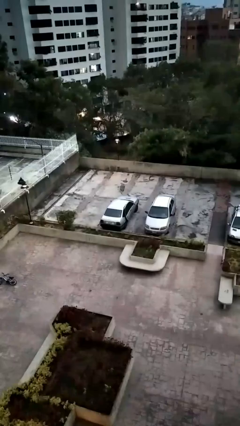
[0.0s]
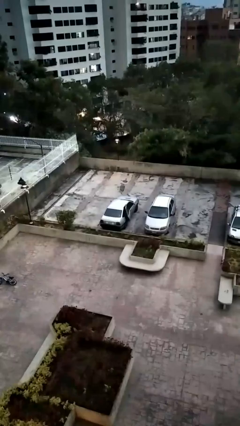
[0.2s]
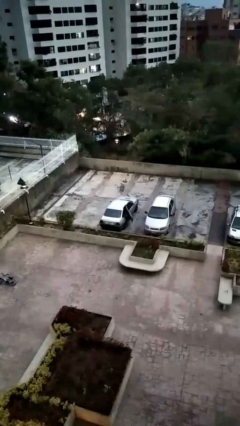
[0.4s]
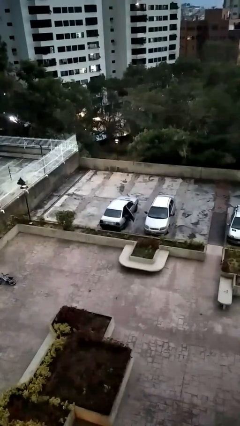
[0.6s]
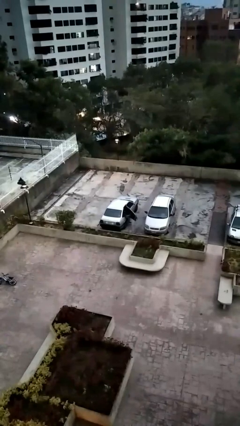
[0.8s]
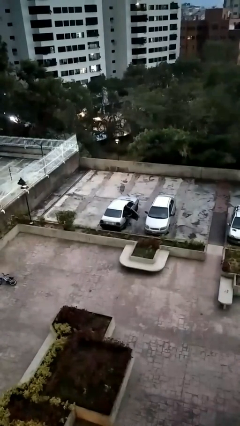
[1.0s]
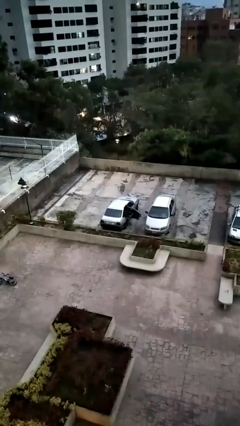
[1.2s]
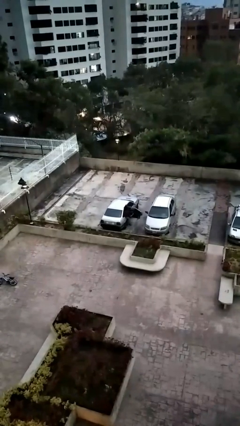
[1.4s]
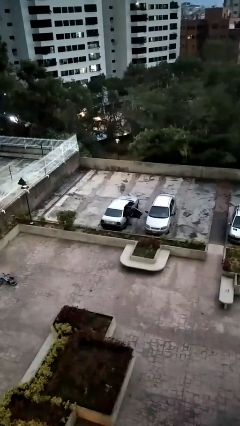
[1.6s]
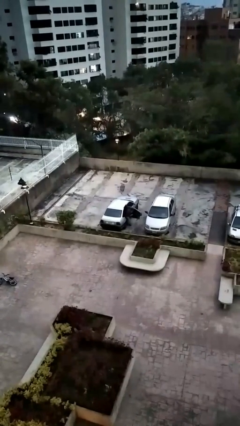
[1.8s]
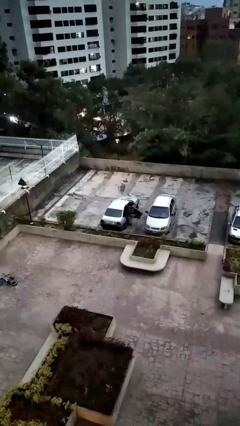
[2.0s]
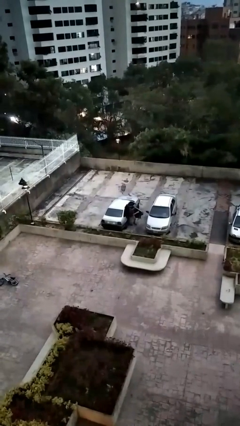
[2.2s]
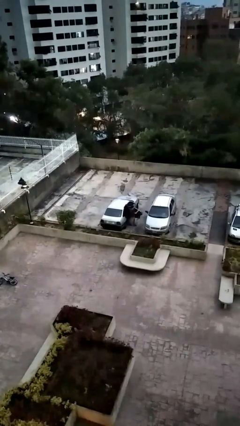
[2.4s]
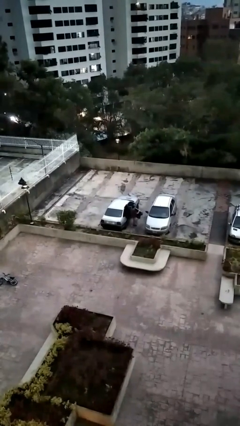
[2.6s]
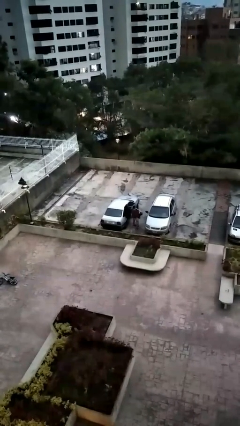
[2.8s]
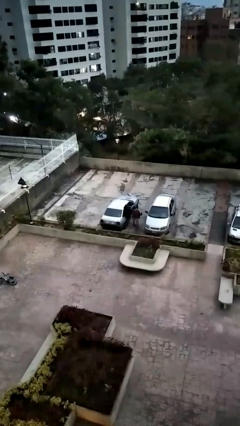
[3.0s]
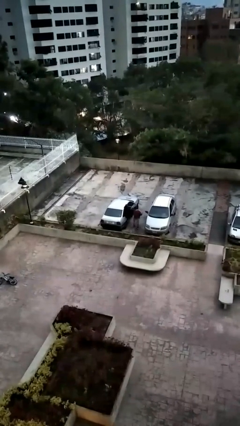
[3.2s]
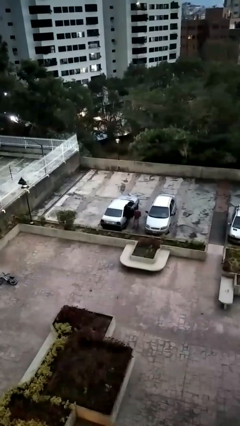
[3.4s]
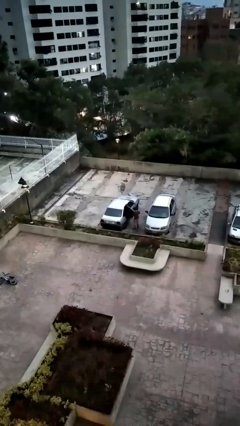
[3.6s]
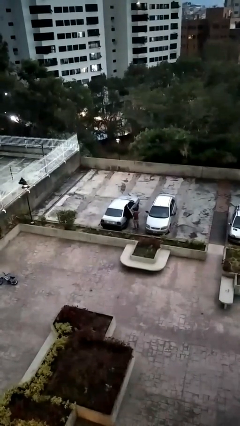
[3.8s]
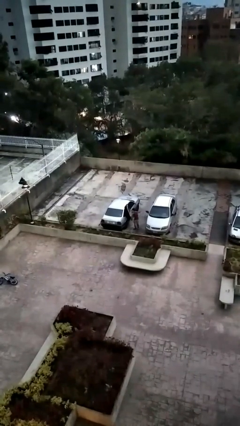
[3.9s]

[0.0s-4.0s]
car drops off person

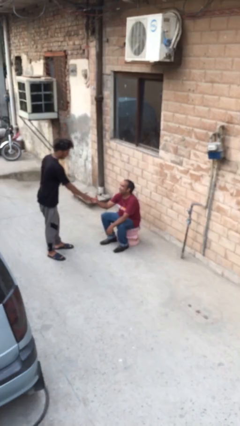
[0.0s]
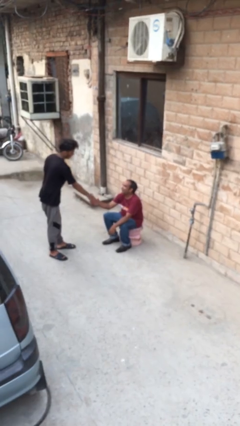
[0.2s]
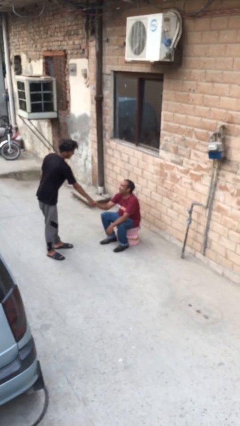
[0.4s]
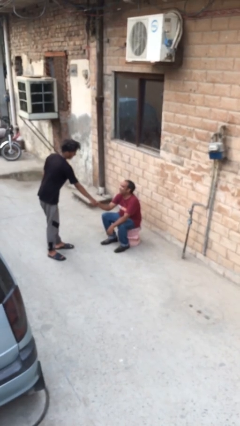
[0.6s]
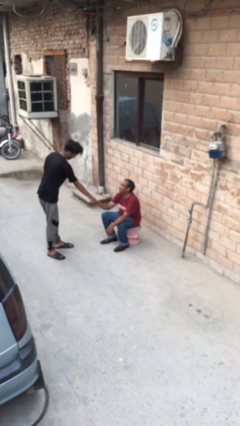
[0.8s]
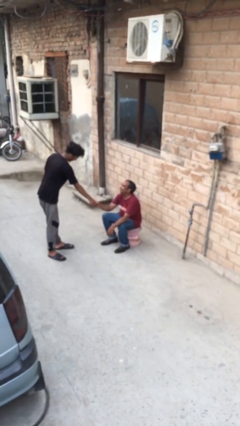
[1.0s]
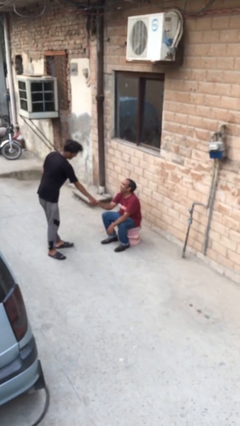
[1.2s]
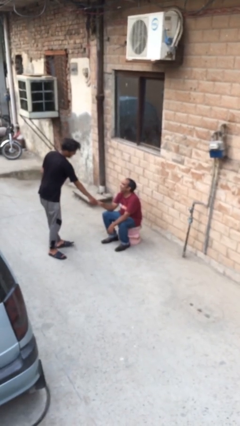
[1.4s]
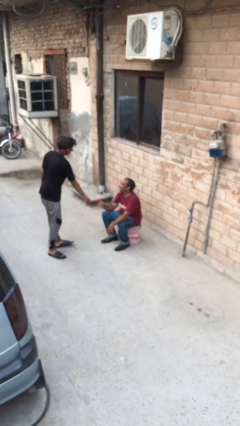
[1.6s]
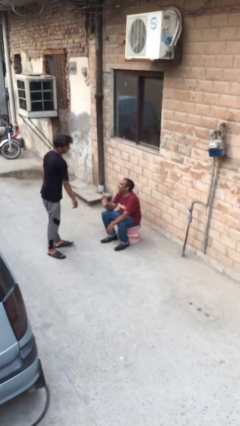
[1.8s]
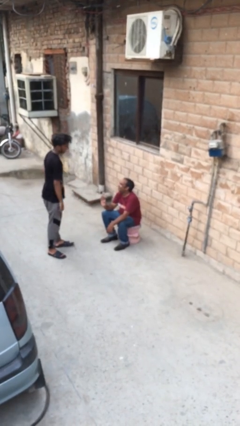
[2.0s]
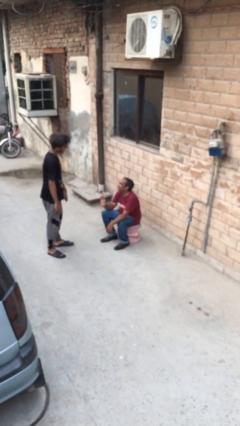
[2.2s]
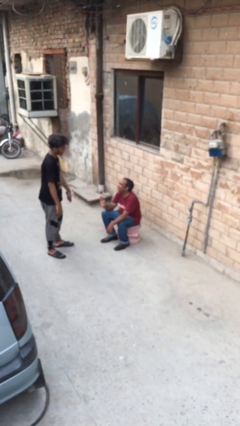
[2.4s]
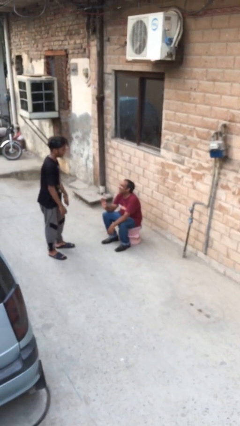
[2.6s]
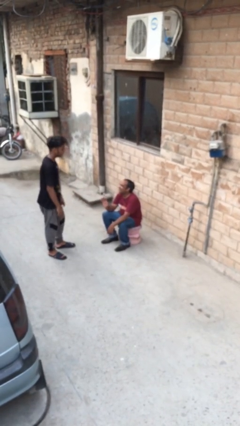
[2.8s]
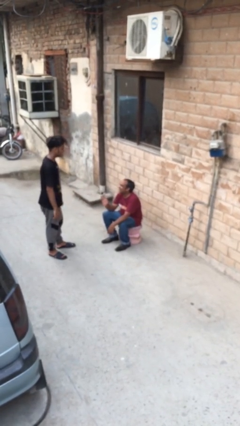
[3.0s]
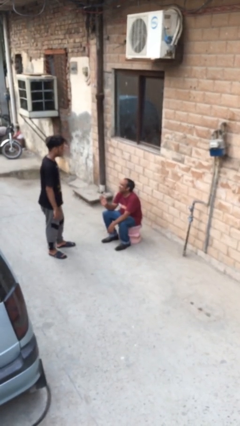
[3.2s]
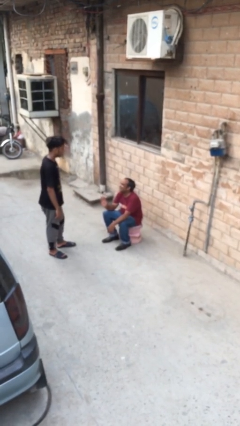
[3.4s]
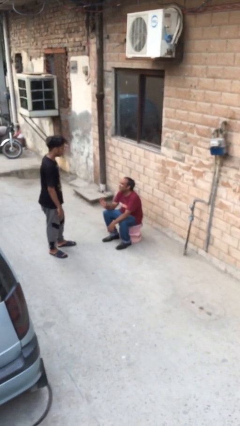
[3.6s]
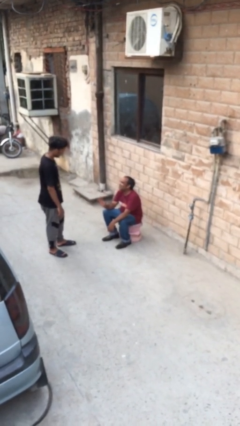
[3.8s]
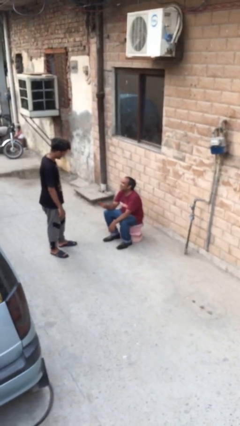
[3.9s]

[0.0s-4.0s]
person shakes hand

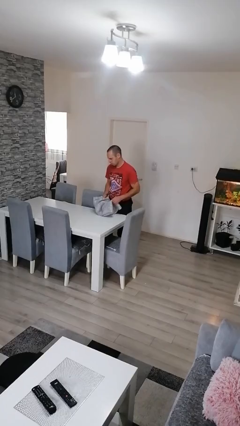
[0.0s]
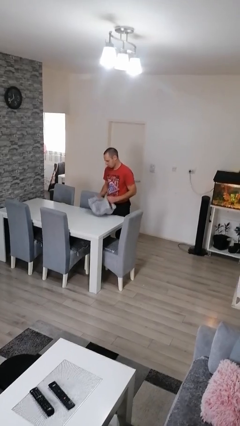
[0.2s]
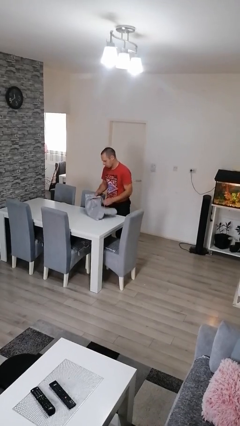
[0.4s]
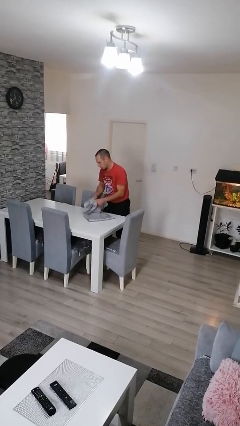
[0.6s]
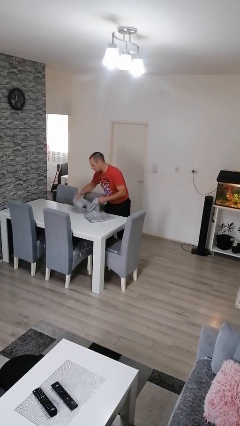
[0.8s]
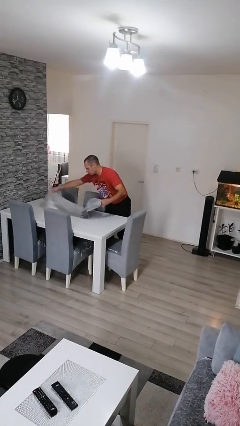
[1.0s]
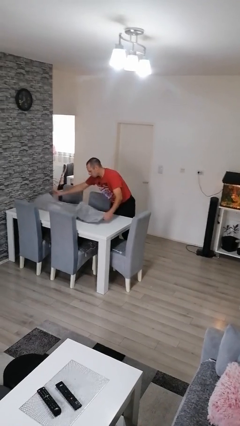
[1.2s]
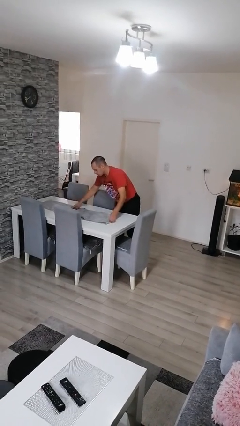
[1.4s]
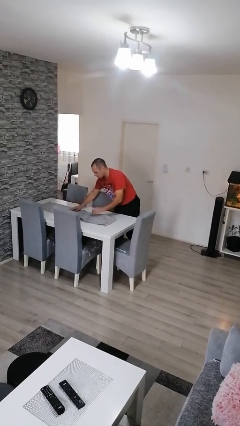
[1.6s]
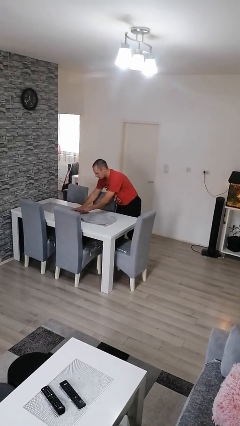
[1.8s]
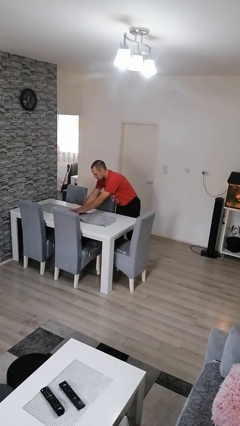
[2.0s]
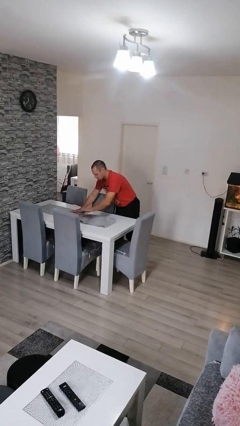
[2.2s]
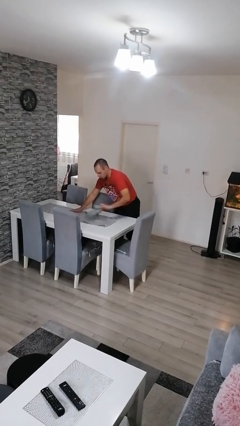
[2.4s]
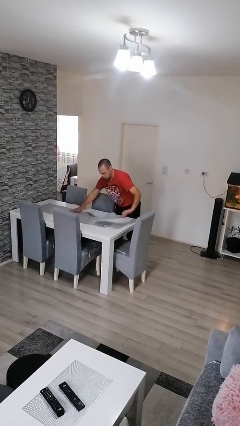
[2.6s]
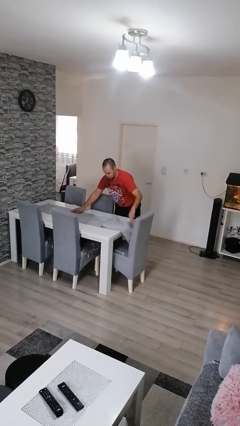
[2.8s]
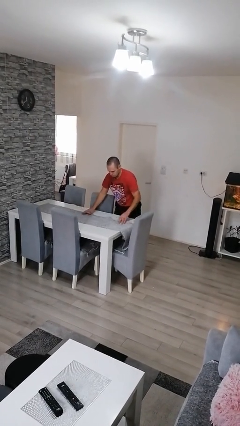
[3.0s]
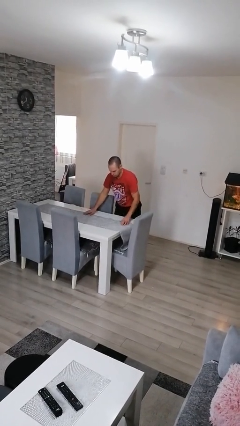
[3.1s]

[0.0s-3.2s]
person spreads tablecloth

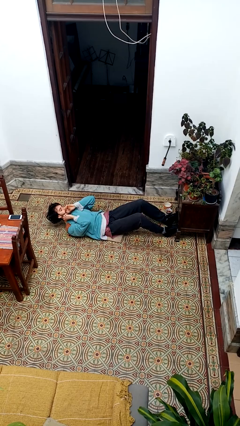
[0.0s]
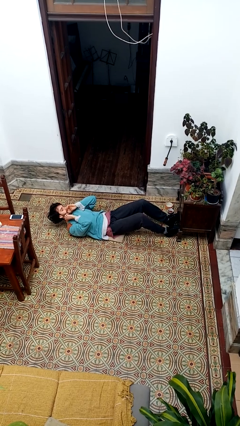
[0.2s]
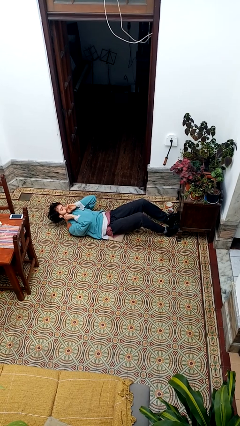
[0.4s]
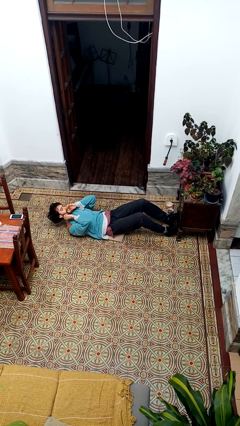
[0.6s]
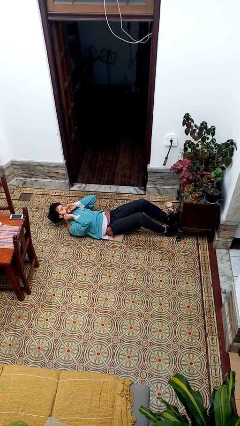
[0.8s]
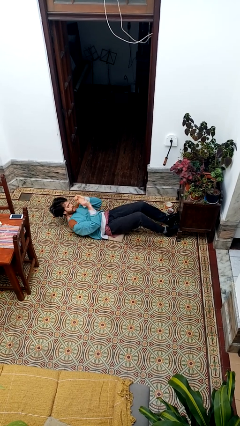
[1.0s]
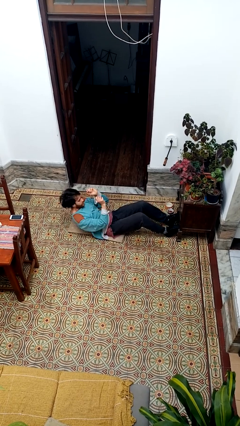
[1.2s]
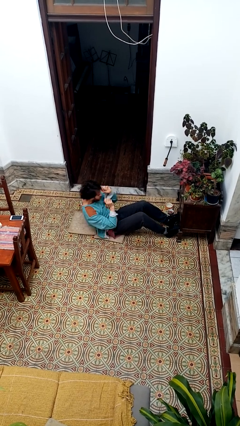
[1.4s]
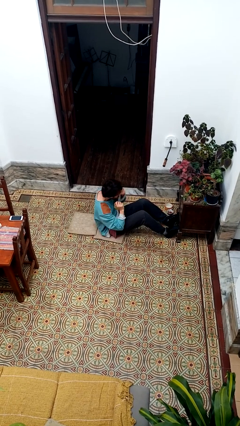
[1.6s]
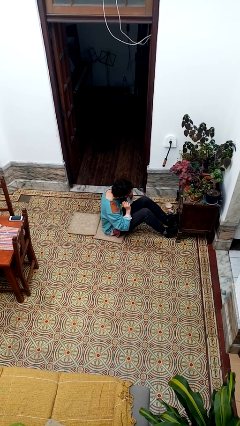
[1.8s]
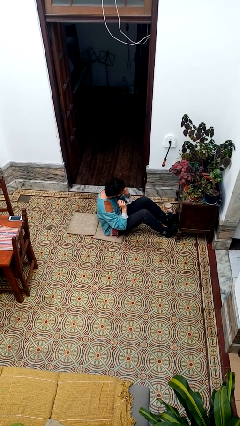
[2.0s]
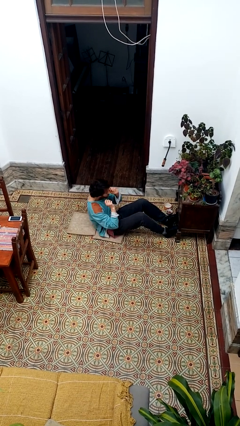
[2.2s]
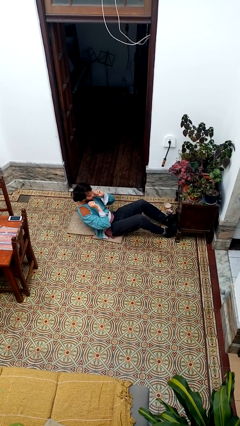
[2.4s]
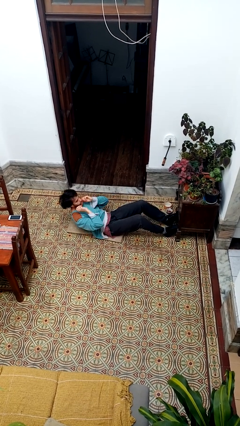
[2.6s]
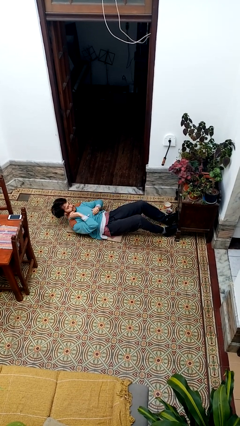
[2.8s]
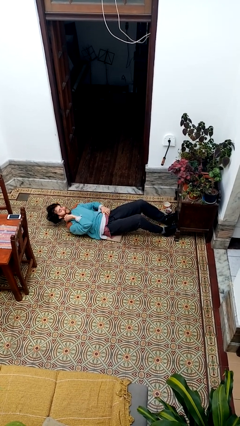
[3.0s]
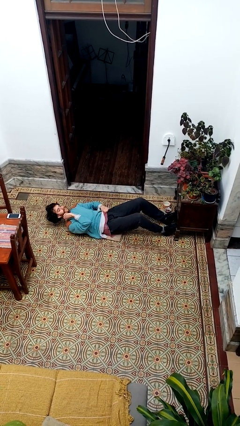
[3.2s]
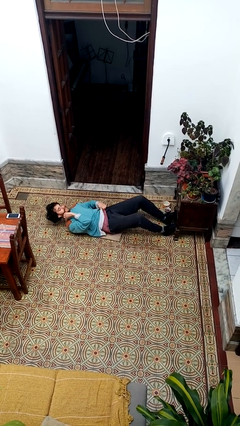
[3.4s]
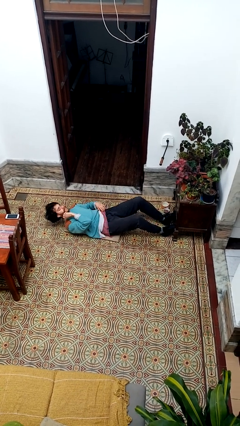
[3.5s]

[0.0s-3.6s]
person exercises with situp

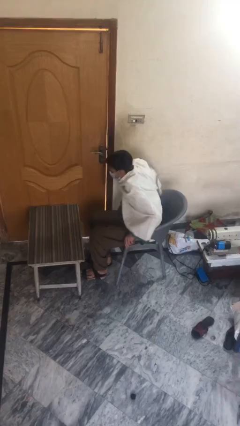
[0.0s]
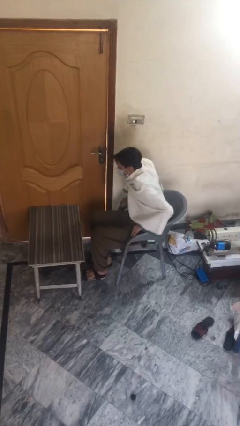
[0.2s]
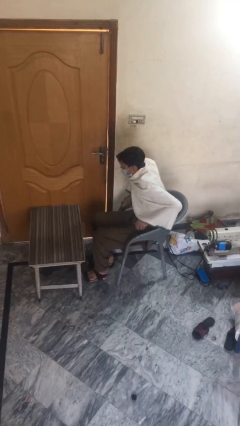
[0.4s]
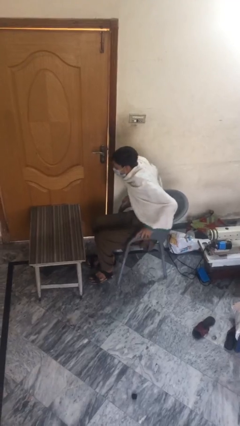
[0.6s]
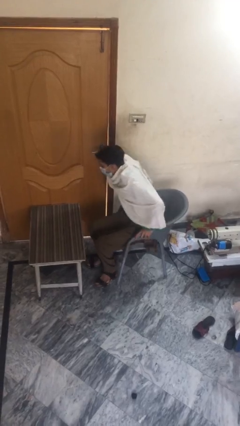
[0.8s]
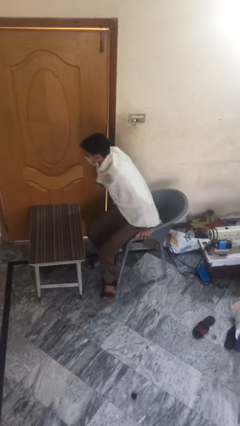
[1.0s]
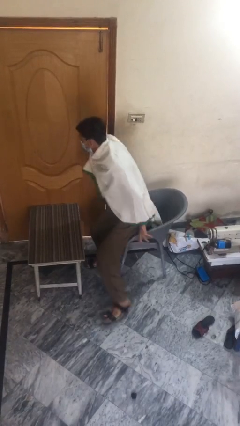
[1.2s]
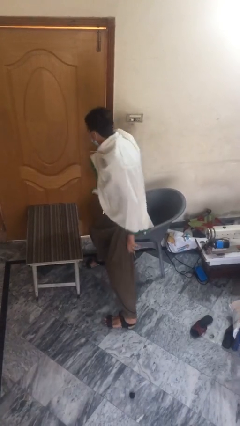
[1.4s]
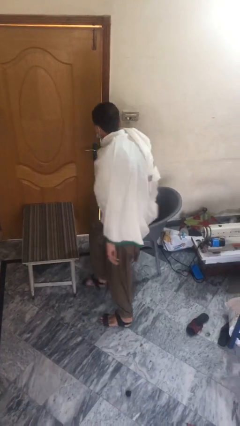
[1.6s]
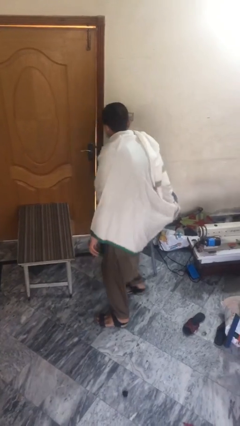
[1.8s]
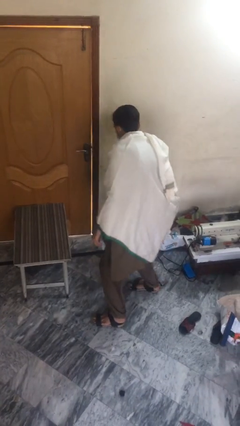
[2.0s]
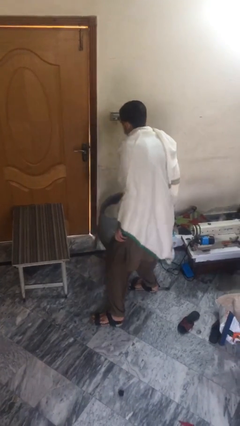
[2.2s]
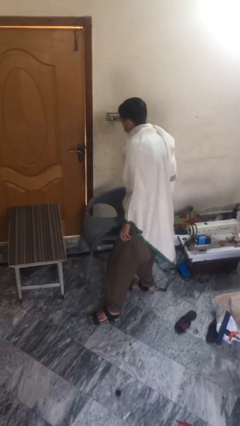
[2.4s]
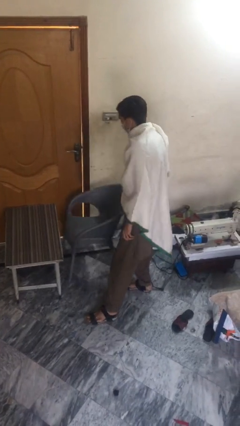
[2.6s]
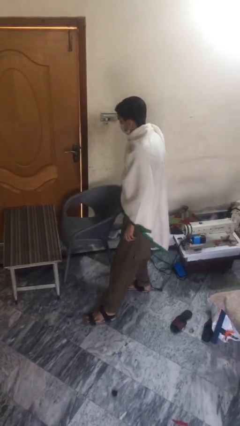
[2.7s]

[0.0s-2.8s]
person stands up
